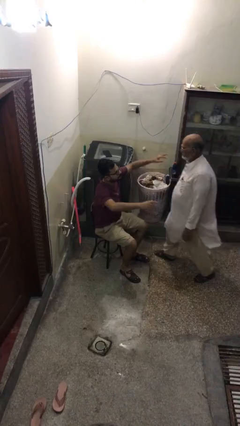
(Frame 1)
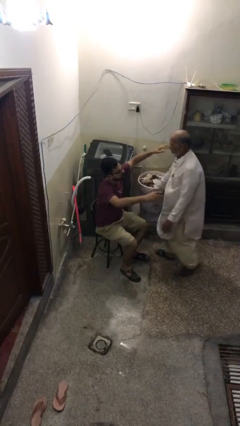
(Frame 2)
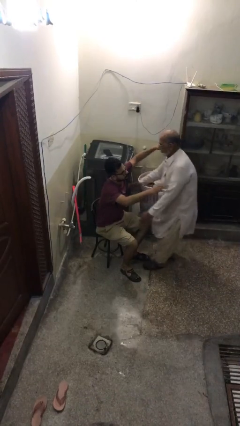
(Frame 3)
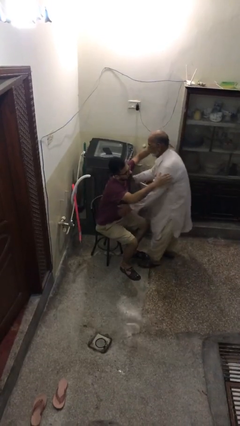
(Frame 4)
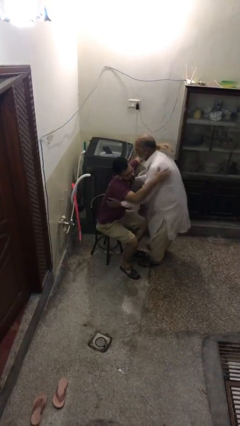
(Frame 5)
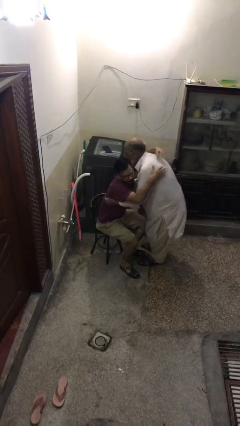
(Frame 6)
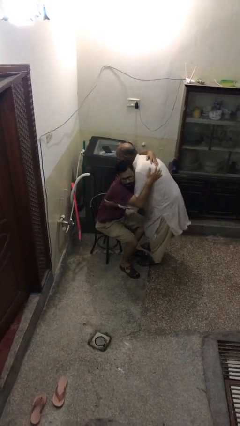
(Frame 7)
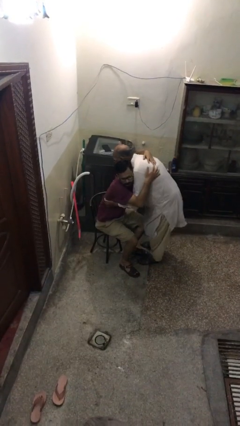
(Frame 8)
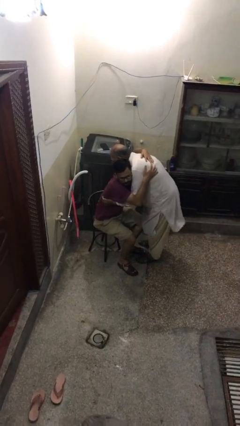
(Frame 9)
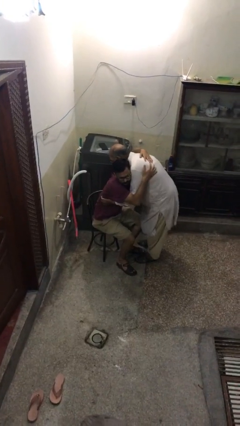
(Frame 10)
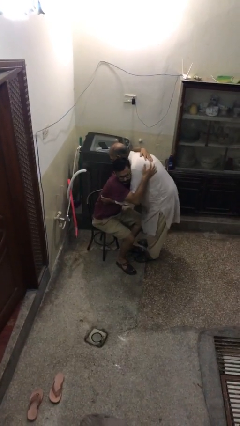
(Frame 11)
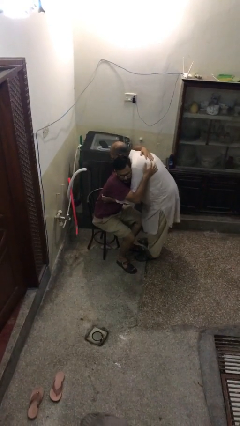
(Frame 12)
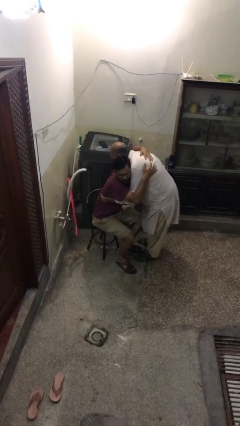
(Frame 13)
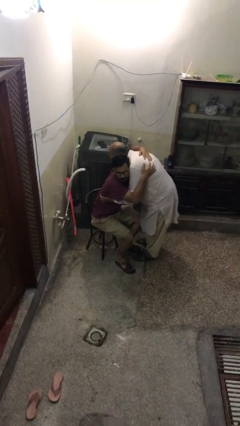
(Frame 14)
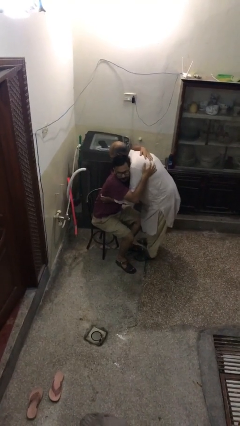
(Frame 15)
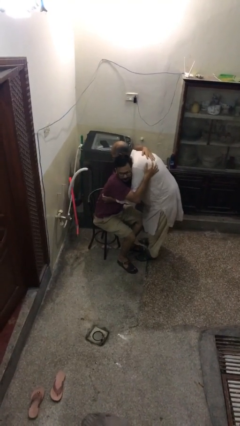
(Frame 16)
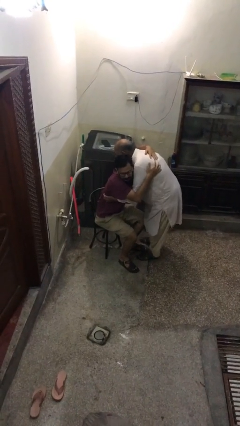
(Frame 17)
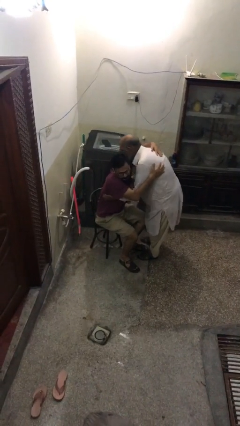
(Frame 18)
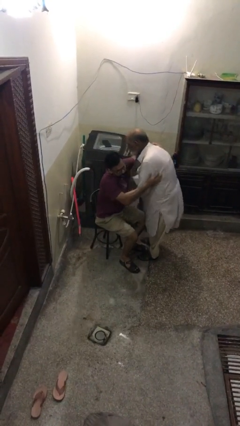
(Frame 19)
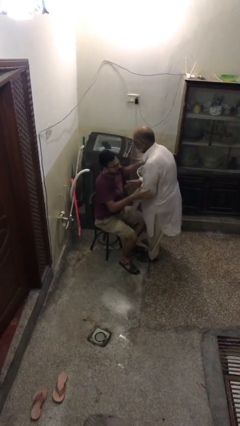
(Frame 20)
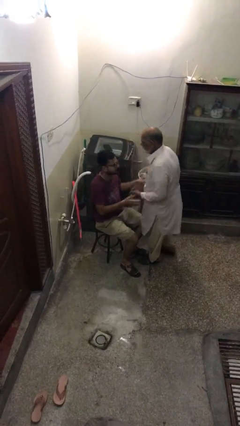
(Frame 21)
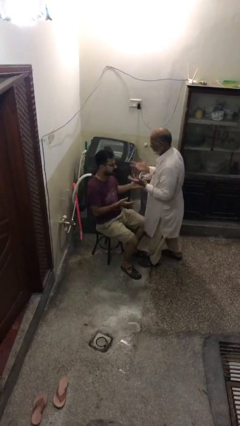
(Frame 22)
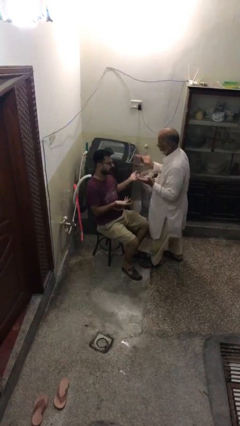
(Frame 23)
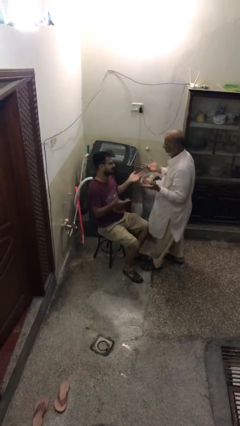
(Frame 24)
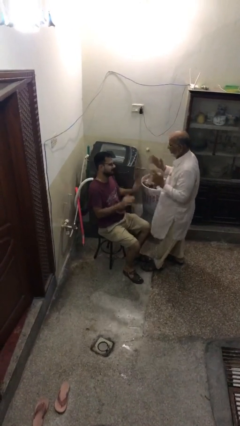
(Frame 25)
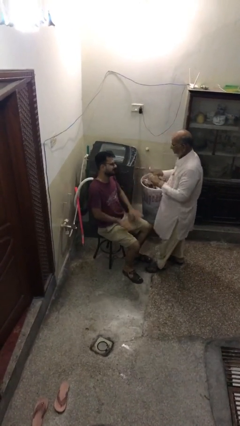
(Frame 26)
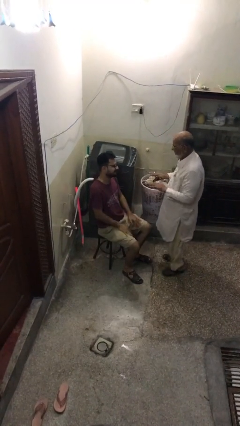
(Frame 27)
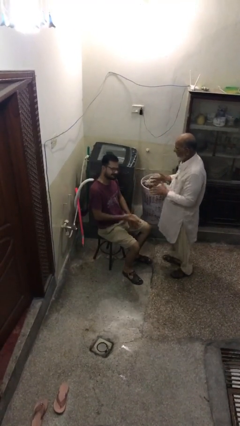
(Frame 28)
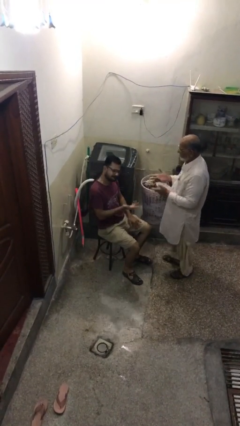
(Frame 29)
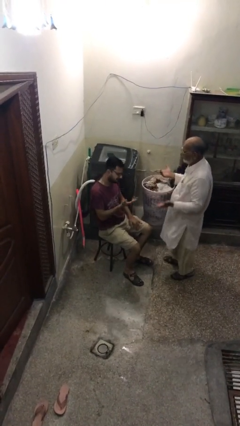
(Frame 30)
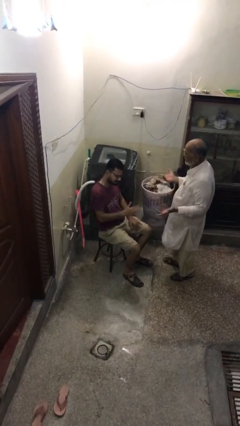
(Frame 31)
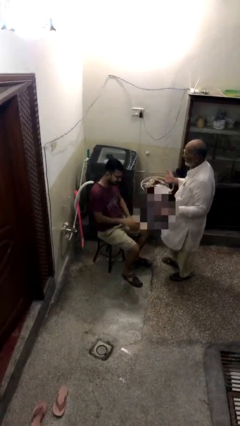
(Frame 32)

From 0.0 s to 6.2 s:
person embraces person

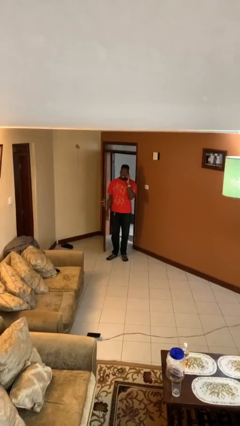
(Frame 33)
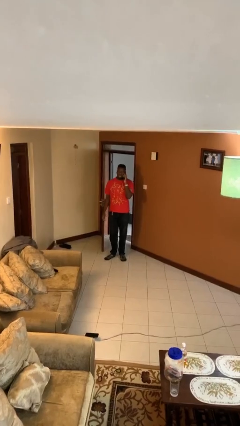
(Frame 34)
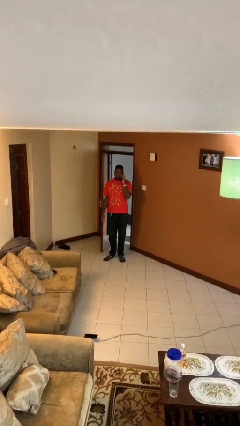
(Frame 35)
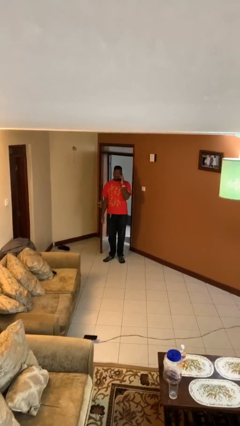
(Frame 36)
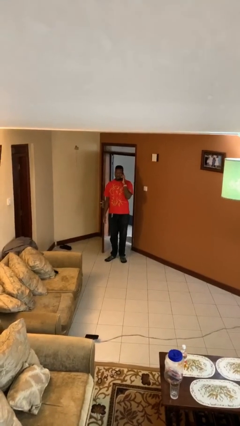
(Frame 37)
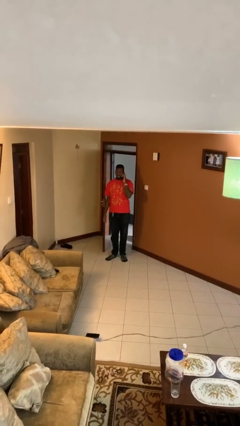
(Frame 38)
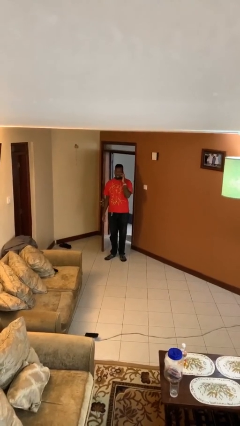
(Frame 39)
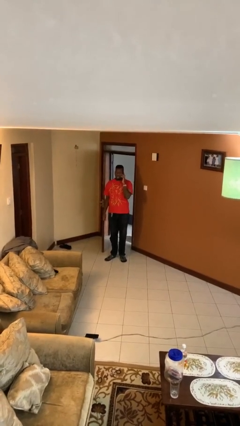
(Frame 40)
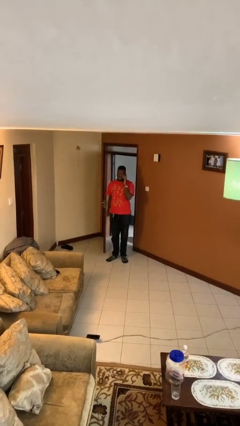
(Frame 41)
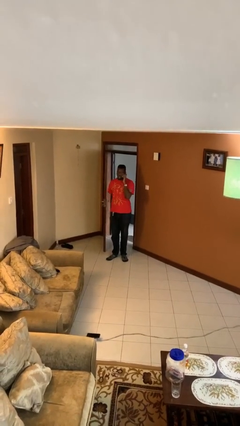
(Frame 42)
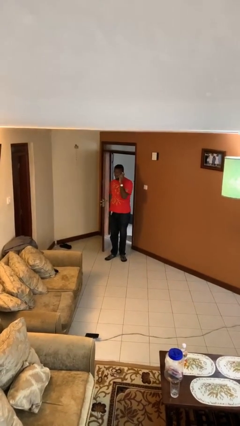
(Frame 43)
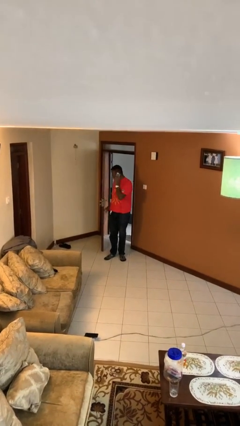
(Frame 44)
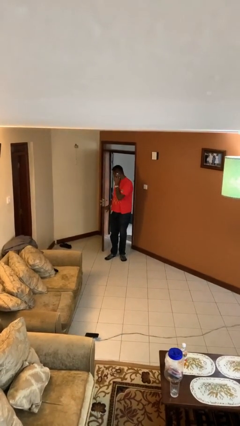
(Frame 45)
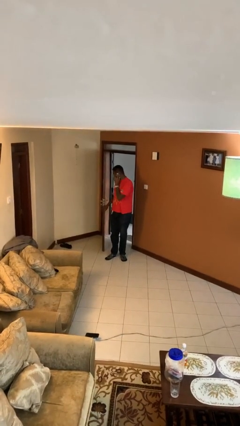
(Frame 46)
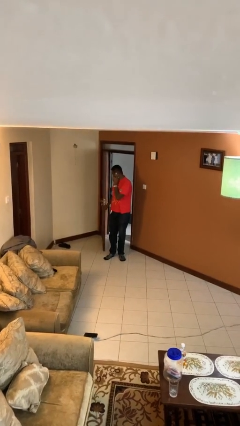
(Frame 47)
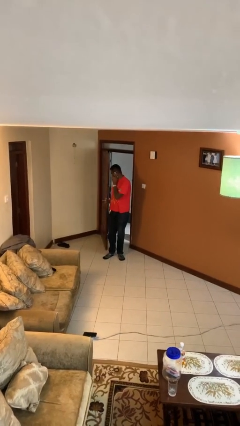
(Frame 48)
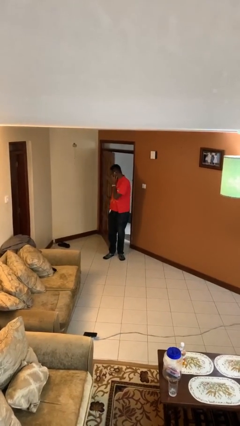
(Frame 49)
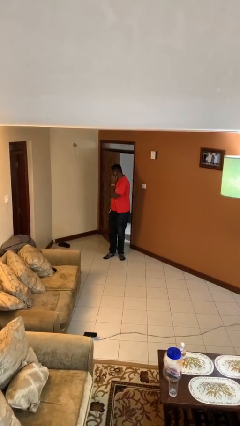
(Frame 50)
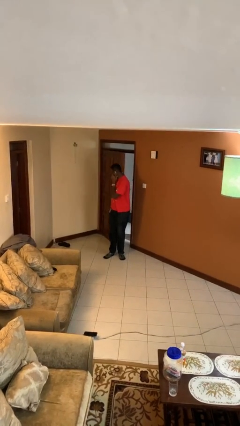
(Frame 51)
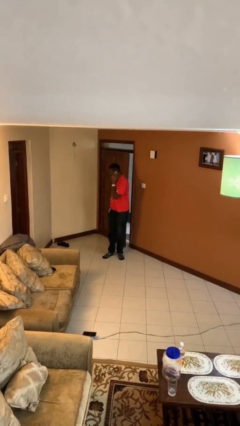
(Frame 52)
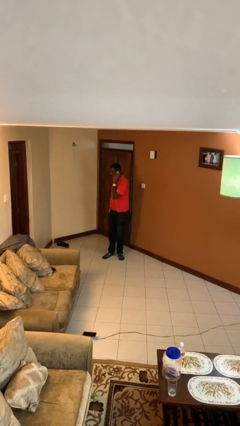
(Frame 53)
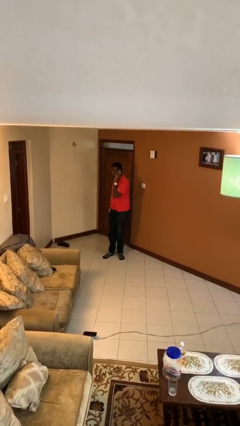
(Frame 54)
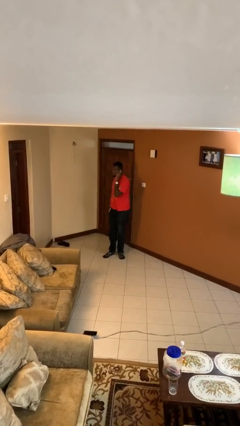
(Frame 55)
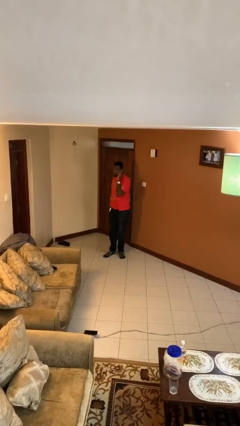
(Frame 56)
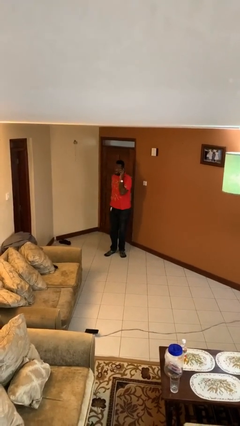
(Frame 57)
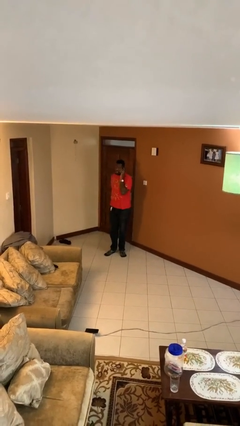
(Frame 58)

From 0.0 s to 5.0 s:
person closes facility door

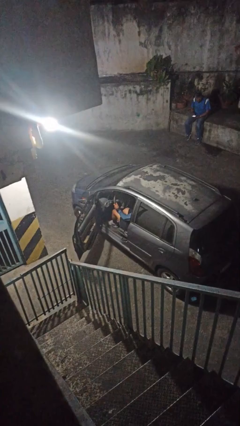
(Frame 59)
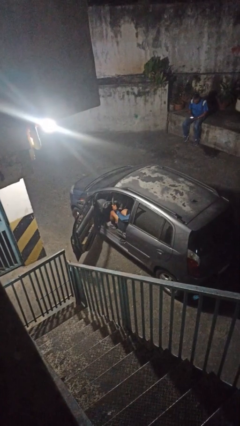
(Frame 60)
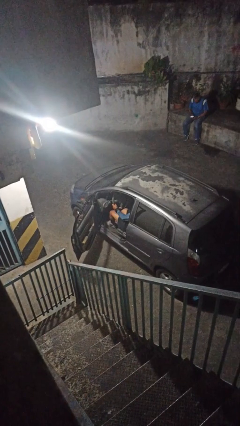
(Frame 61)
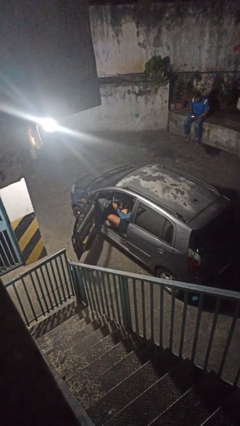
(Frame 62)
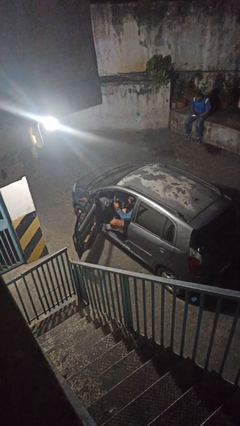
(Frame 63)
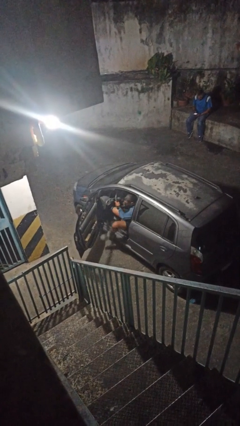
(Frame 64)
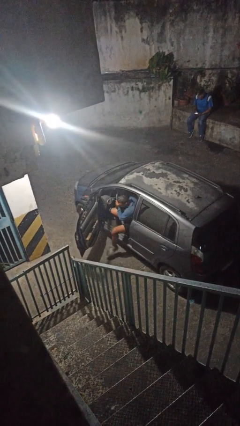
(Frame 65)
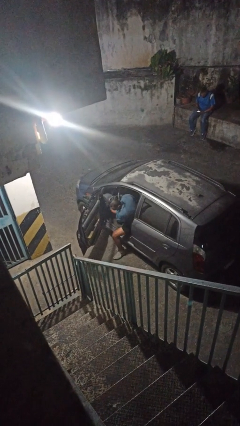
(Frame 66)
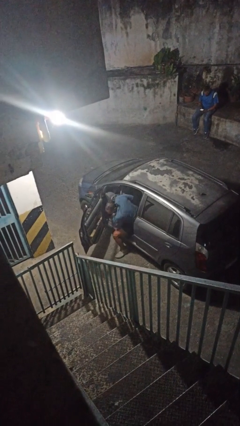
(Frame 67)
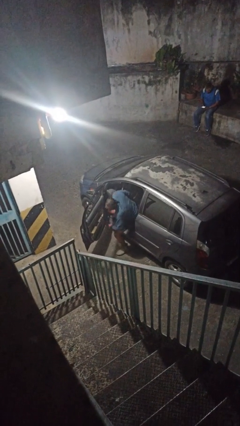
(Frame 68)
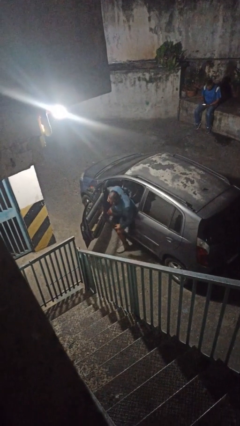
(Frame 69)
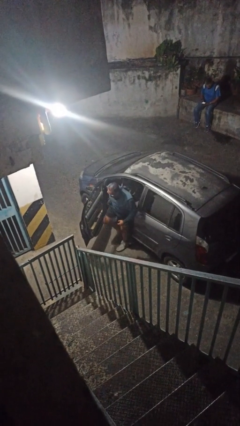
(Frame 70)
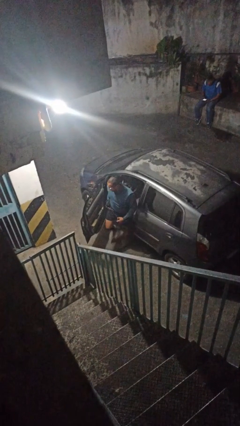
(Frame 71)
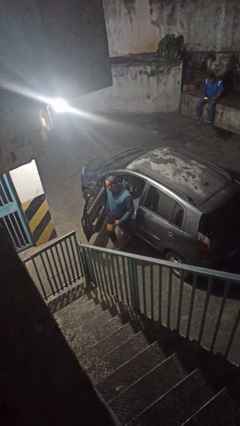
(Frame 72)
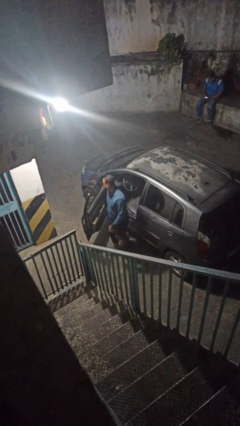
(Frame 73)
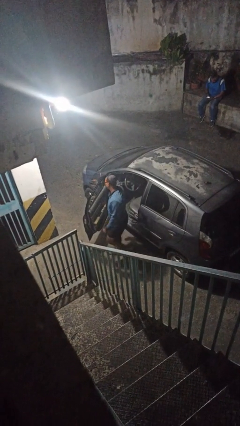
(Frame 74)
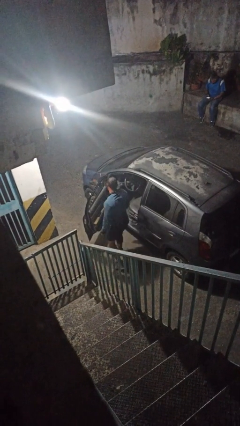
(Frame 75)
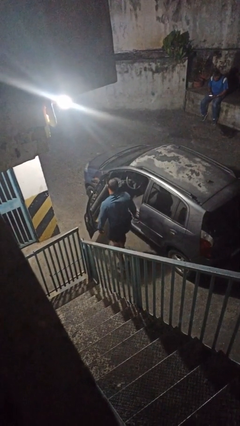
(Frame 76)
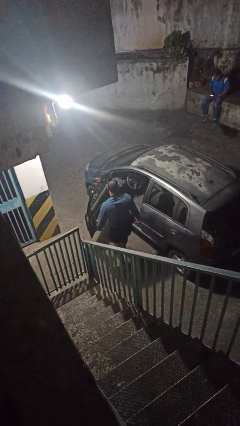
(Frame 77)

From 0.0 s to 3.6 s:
person exits car

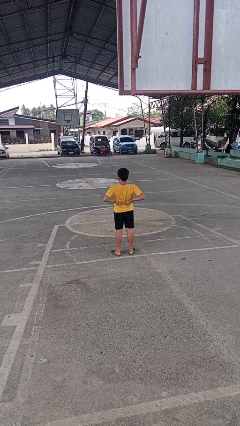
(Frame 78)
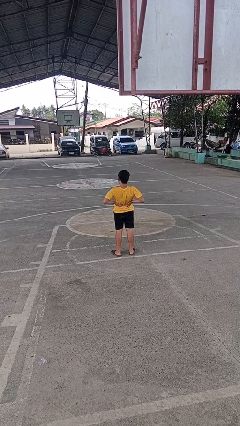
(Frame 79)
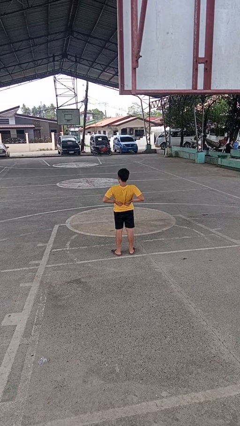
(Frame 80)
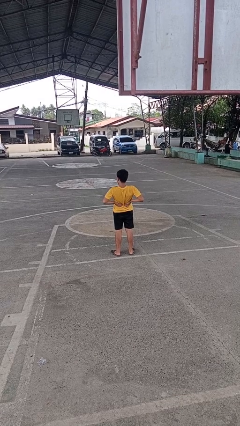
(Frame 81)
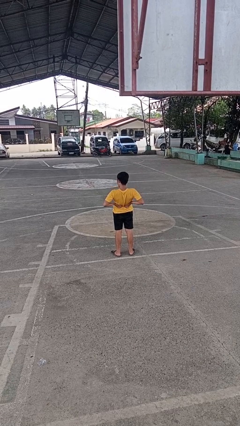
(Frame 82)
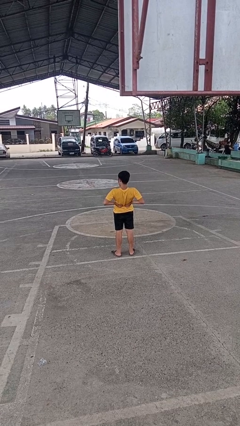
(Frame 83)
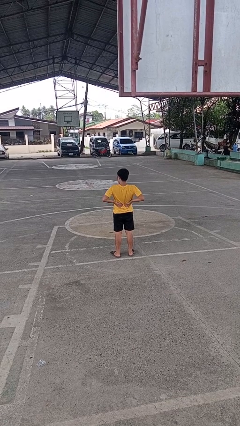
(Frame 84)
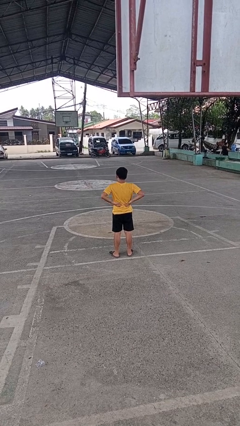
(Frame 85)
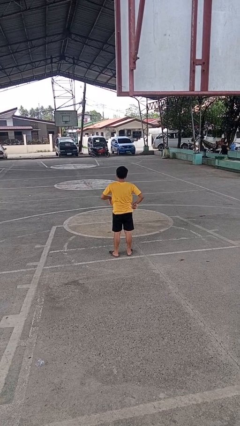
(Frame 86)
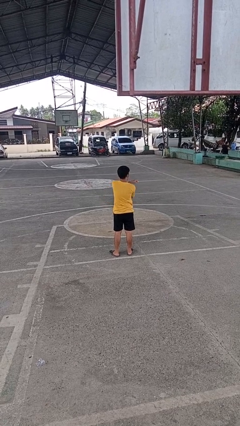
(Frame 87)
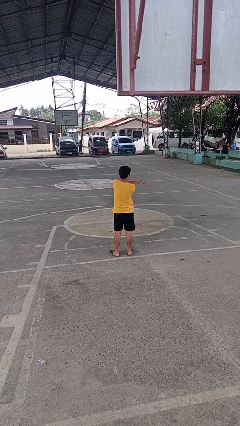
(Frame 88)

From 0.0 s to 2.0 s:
person stretches back

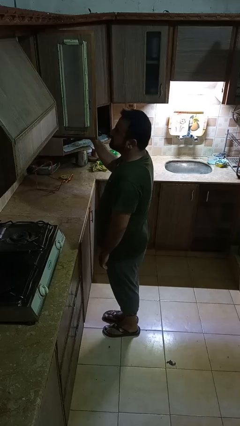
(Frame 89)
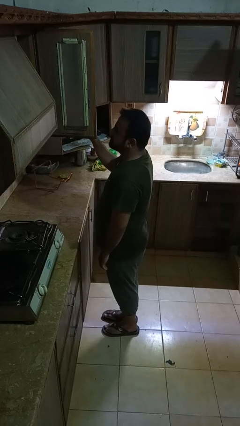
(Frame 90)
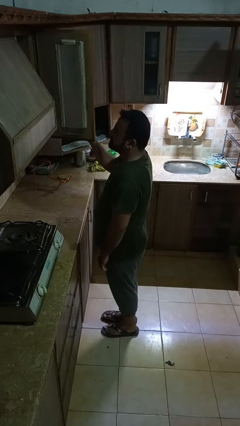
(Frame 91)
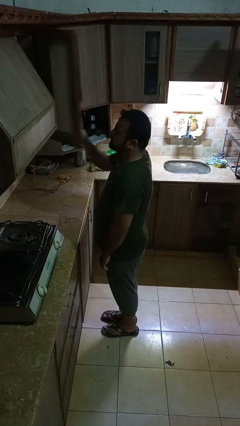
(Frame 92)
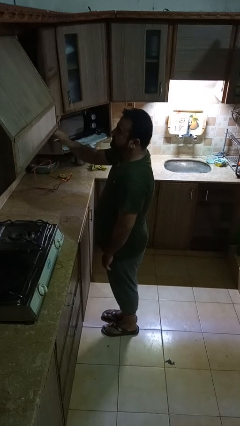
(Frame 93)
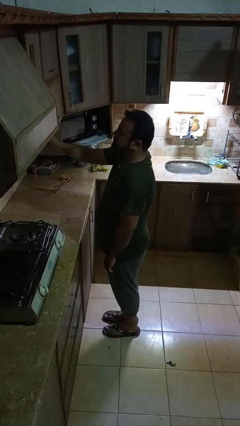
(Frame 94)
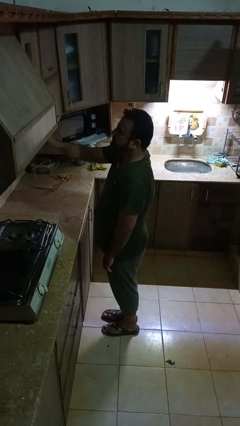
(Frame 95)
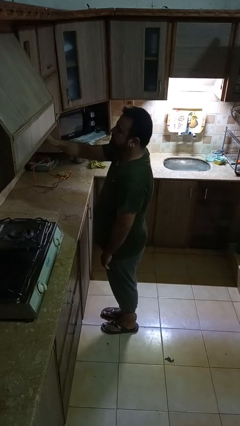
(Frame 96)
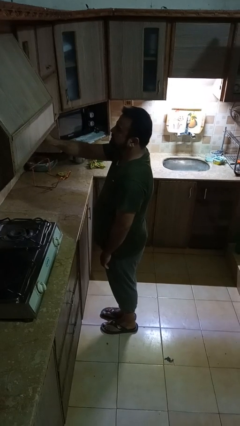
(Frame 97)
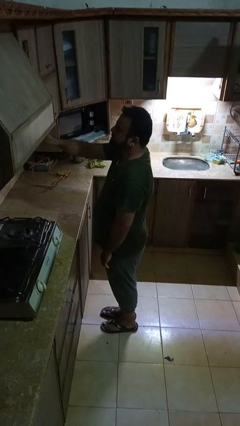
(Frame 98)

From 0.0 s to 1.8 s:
person closes cabinet
